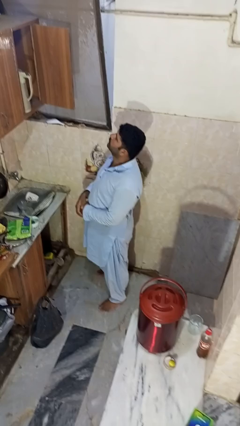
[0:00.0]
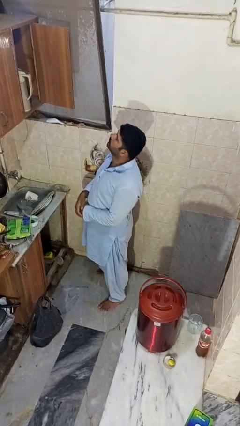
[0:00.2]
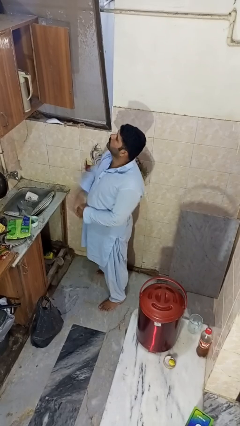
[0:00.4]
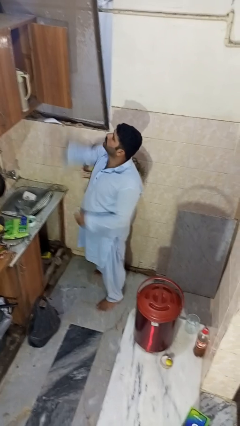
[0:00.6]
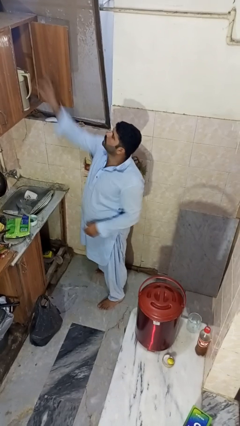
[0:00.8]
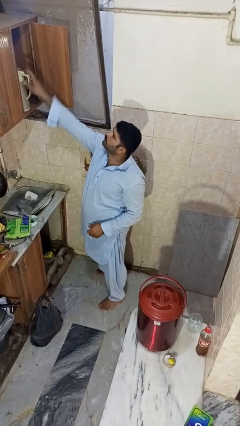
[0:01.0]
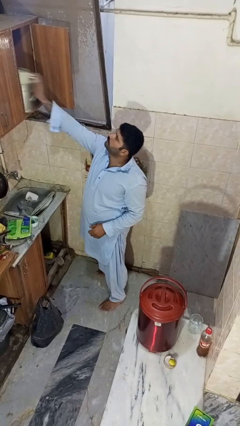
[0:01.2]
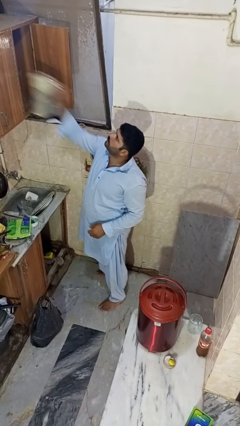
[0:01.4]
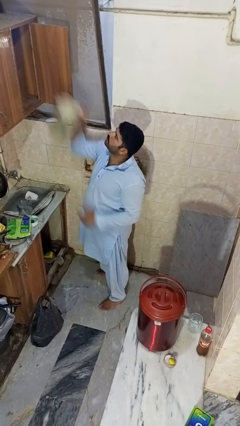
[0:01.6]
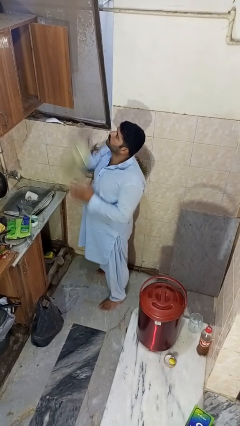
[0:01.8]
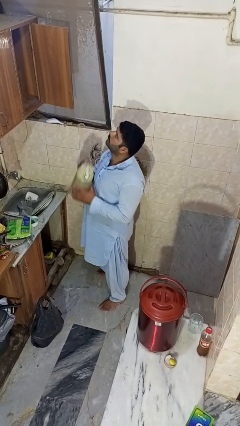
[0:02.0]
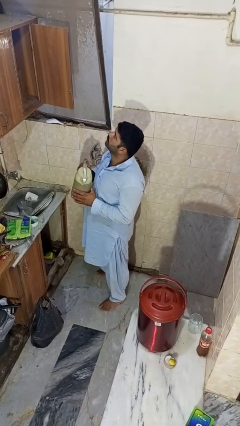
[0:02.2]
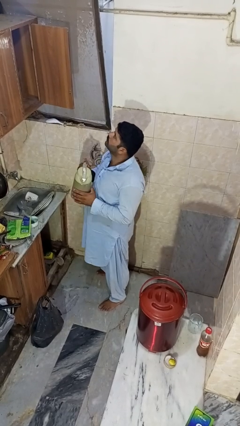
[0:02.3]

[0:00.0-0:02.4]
person takes object from cabinet

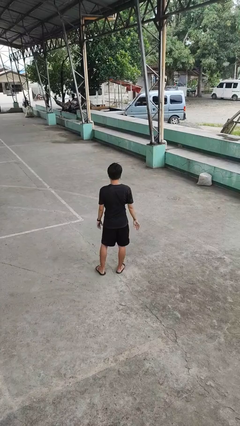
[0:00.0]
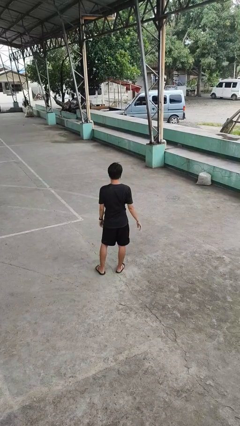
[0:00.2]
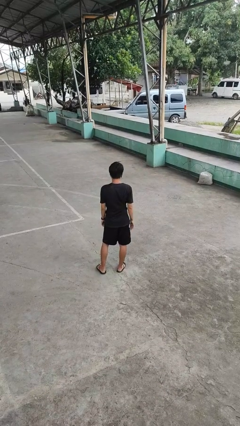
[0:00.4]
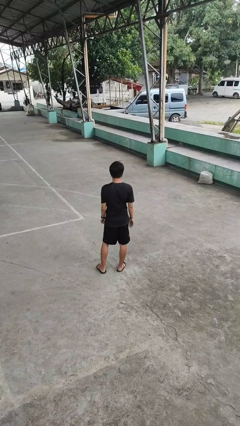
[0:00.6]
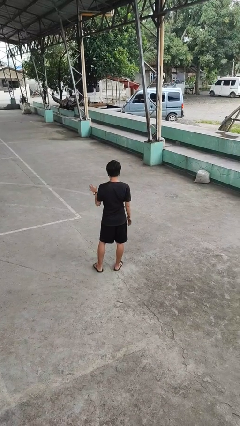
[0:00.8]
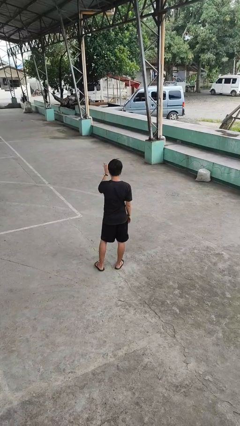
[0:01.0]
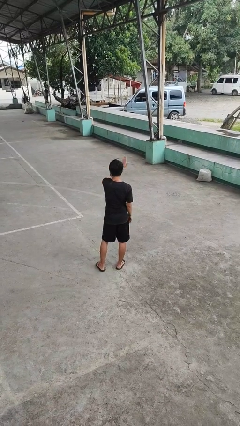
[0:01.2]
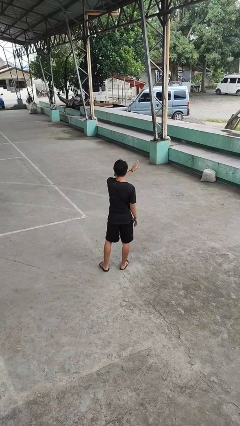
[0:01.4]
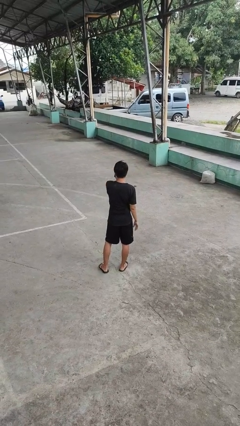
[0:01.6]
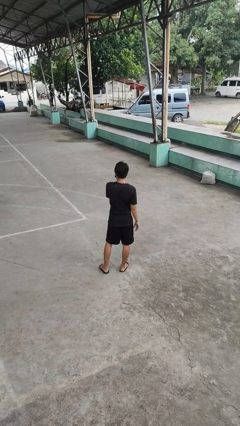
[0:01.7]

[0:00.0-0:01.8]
person gestures swipe right

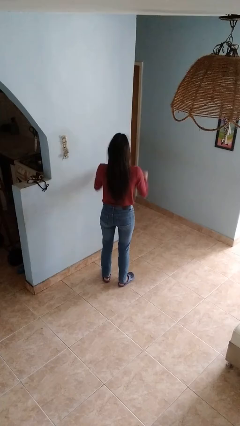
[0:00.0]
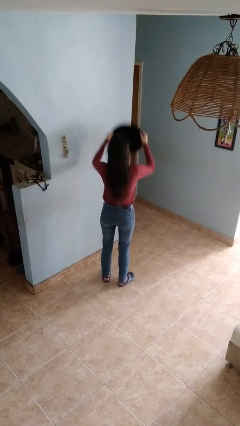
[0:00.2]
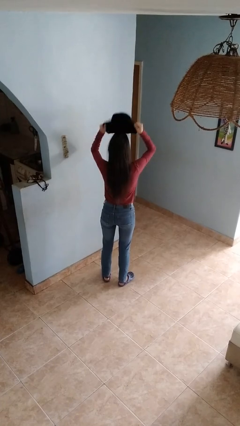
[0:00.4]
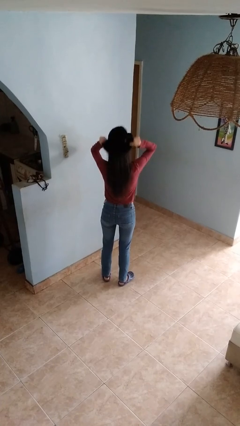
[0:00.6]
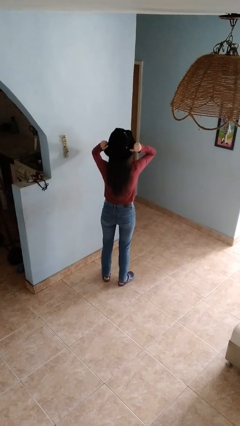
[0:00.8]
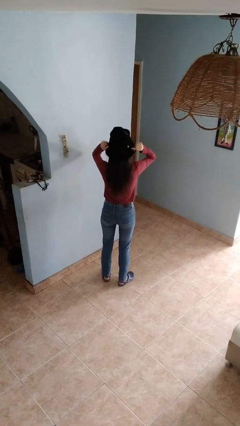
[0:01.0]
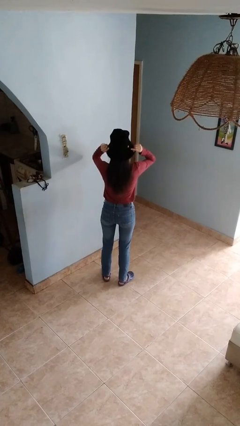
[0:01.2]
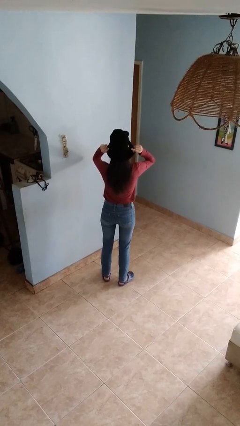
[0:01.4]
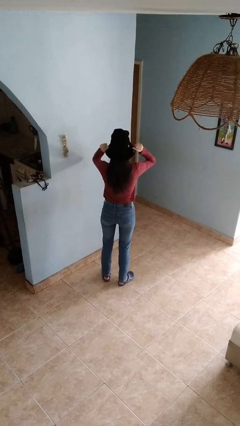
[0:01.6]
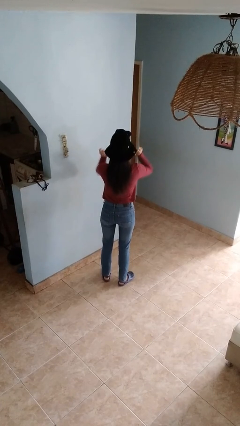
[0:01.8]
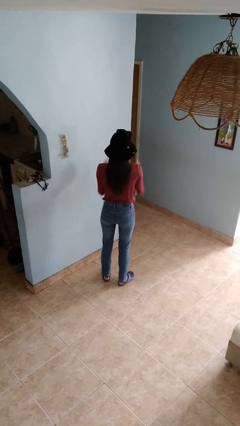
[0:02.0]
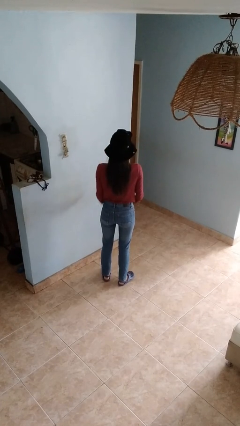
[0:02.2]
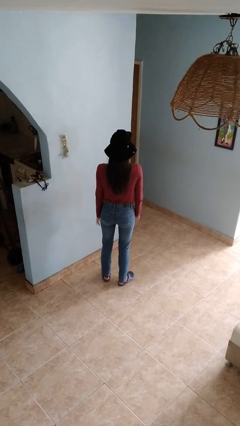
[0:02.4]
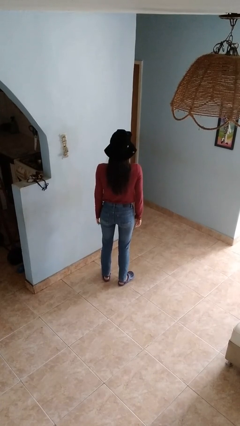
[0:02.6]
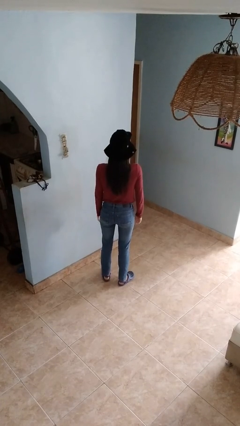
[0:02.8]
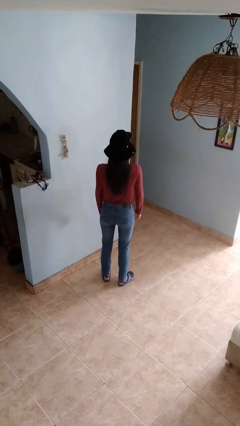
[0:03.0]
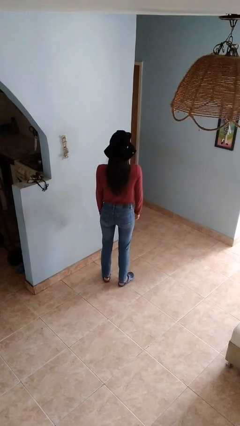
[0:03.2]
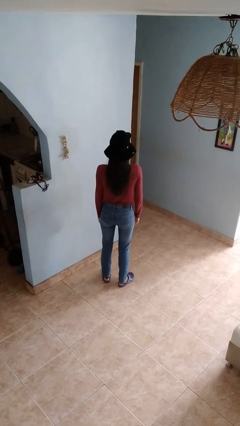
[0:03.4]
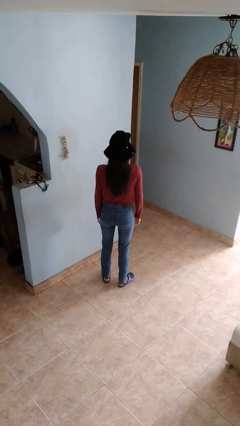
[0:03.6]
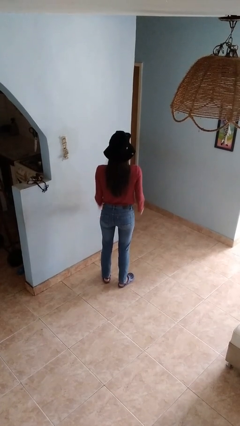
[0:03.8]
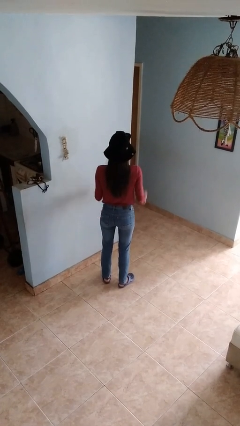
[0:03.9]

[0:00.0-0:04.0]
person puts on hat

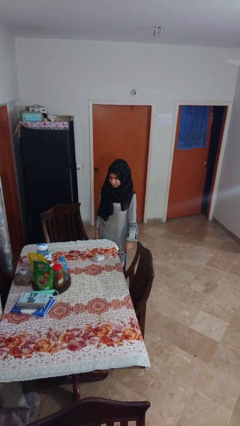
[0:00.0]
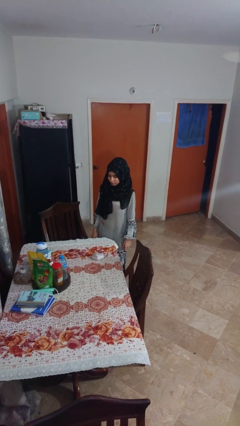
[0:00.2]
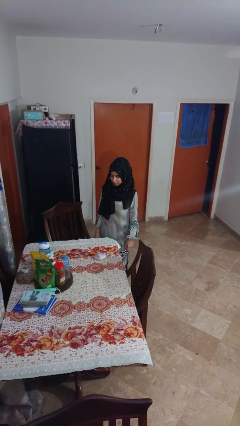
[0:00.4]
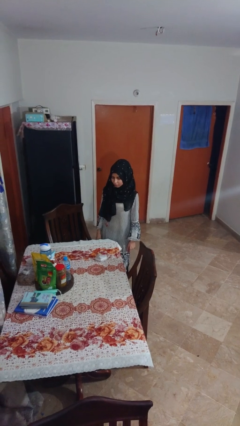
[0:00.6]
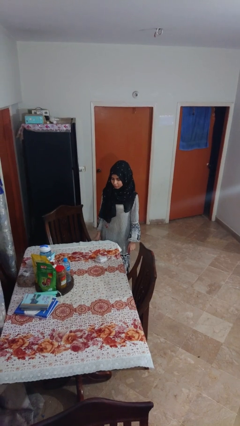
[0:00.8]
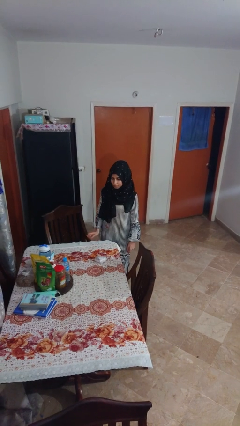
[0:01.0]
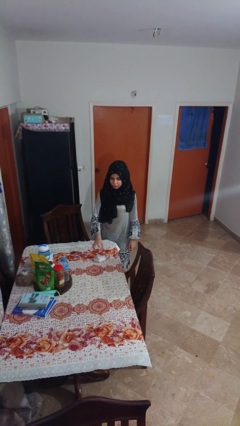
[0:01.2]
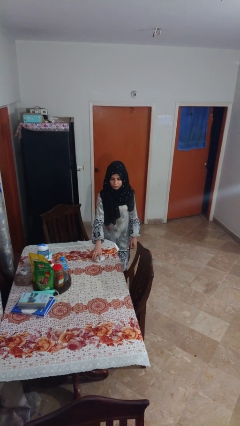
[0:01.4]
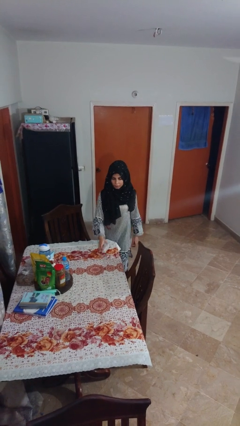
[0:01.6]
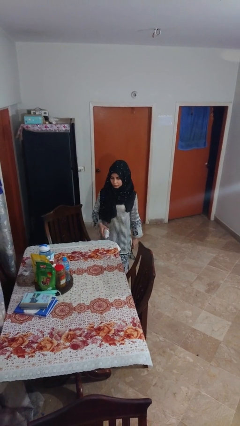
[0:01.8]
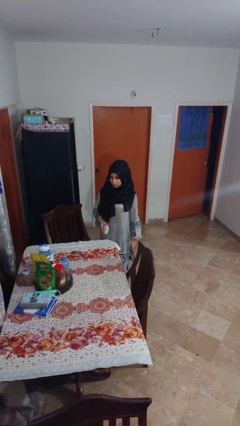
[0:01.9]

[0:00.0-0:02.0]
person picks up object from table

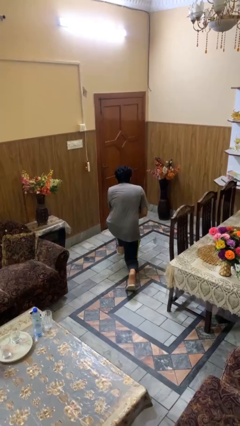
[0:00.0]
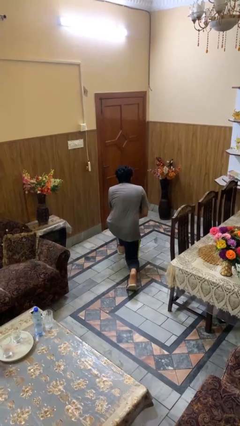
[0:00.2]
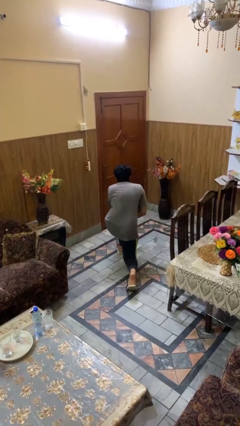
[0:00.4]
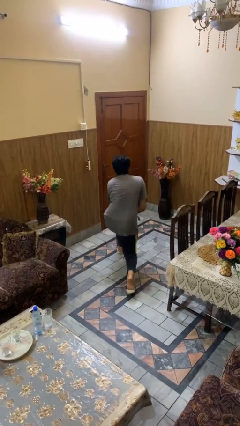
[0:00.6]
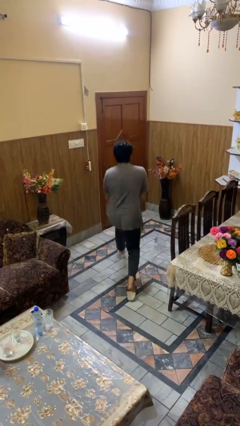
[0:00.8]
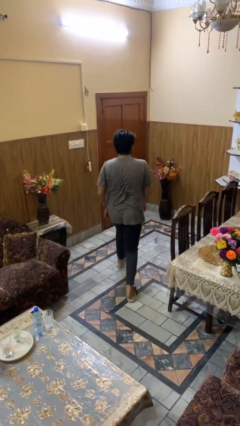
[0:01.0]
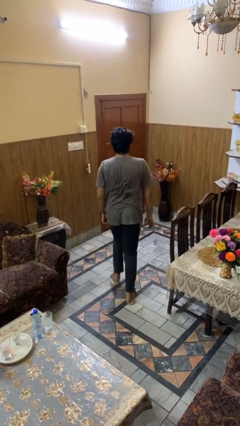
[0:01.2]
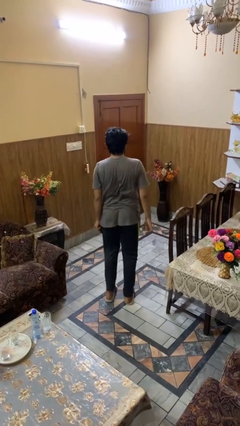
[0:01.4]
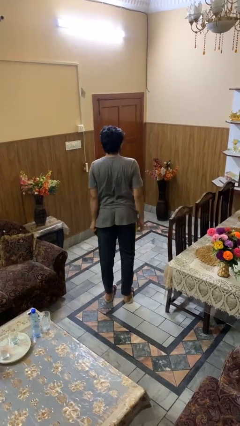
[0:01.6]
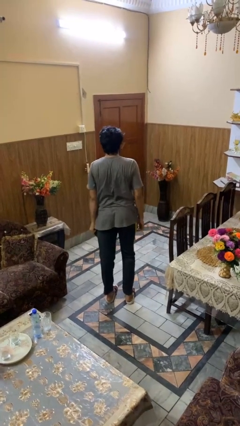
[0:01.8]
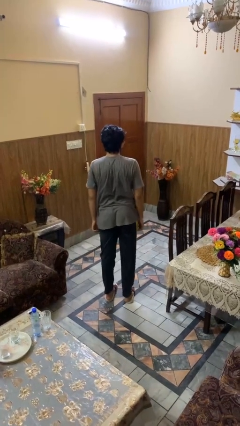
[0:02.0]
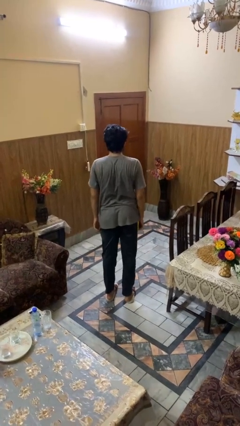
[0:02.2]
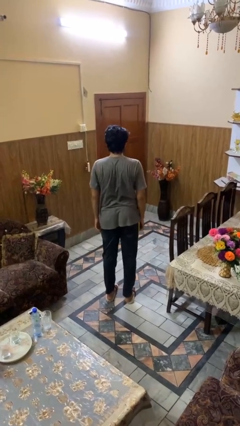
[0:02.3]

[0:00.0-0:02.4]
person stands up from floor

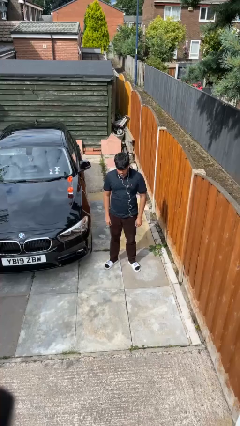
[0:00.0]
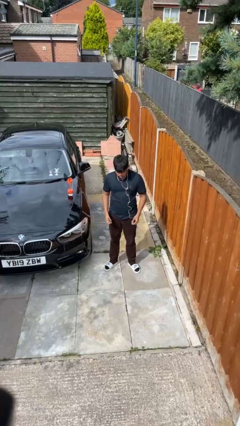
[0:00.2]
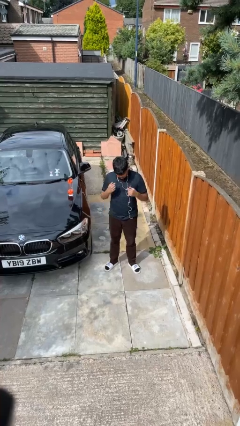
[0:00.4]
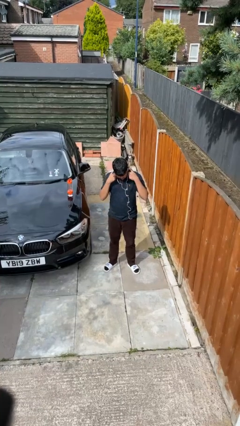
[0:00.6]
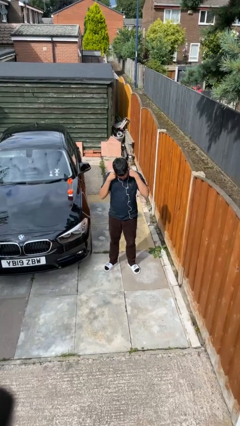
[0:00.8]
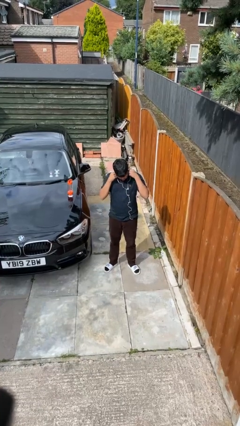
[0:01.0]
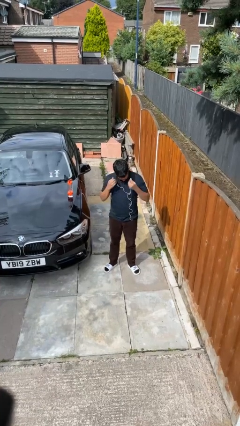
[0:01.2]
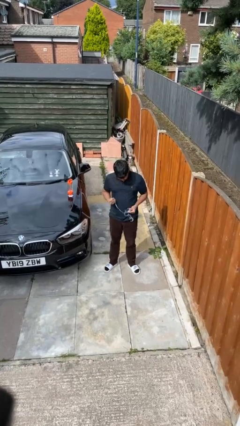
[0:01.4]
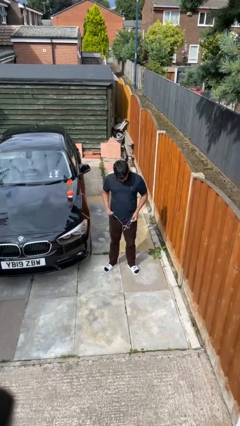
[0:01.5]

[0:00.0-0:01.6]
person takes off headphones

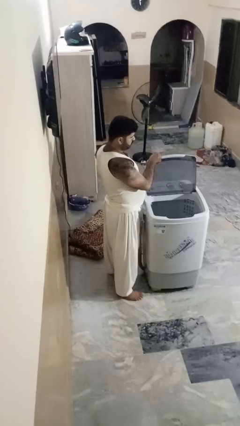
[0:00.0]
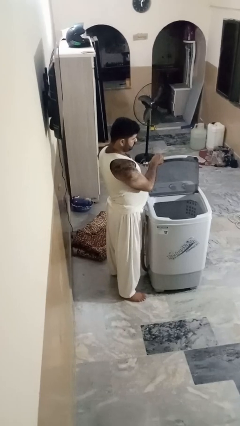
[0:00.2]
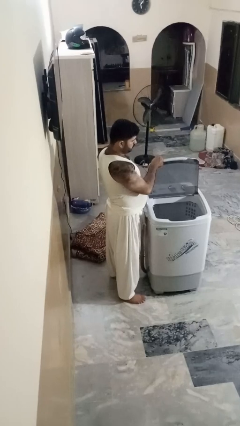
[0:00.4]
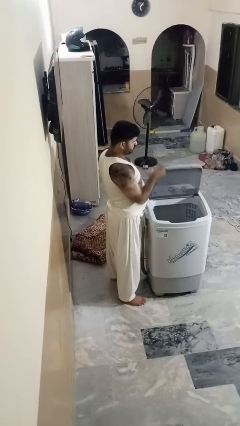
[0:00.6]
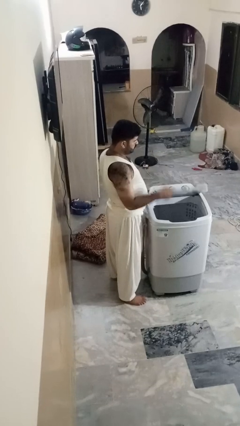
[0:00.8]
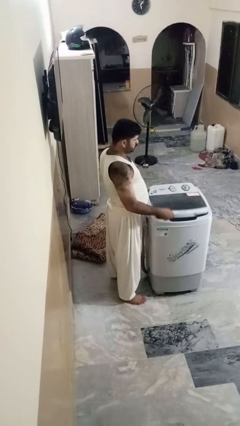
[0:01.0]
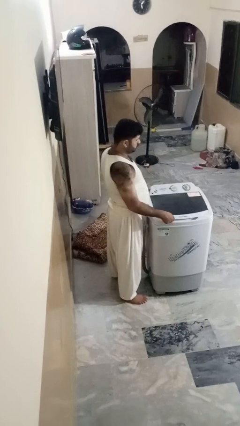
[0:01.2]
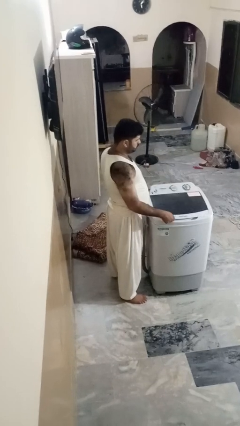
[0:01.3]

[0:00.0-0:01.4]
person closes clothes washer

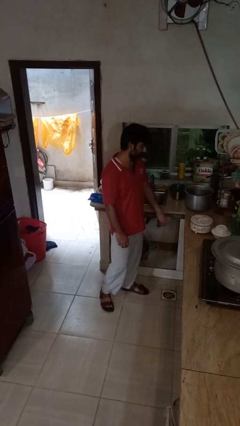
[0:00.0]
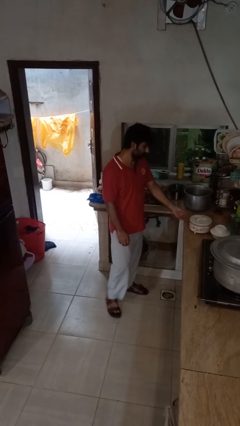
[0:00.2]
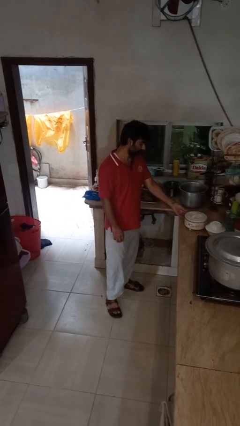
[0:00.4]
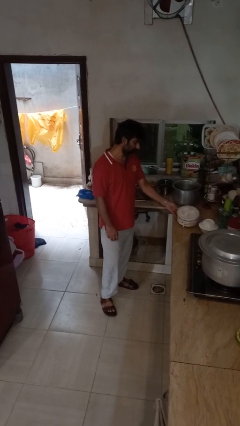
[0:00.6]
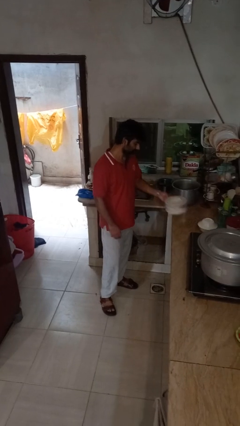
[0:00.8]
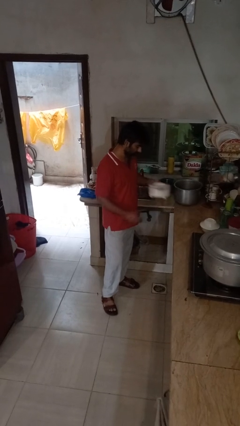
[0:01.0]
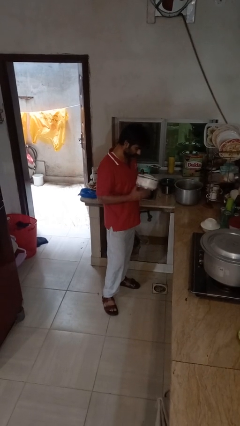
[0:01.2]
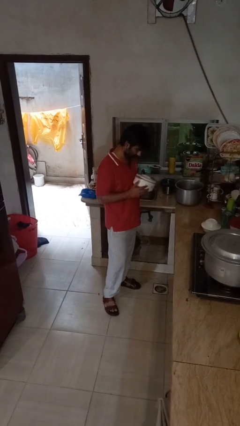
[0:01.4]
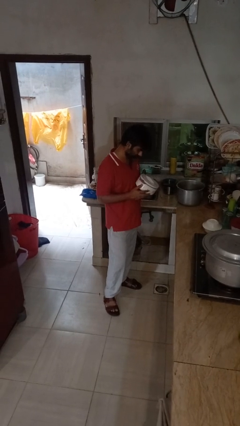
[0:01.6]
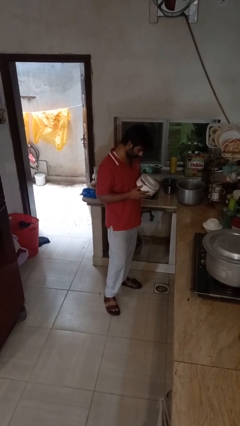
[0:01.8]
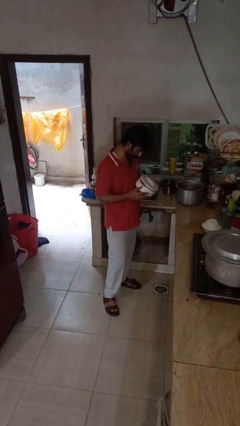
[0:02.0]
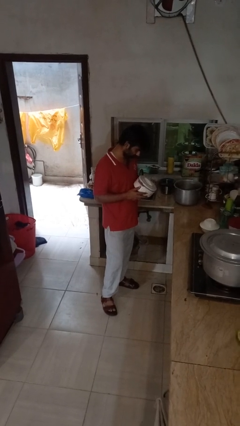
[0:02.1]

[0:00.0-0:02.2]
person picks up object from countertop
